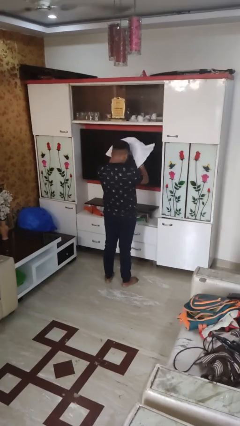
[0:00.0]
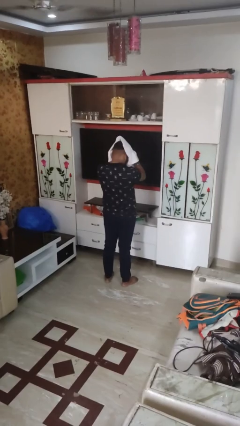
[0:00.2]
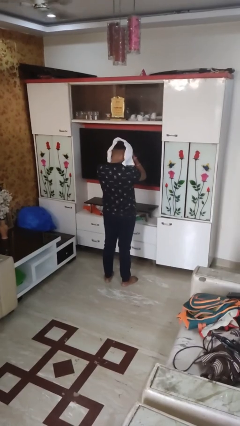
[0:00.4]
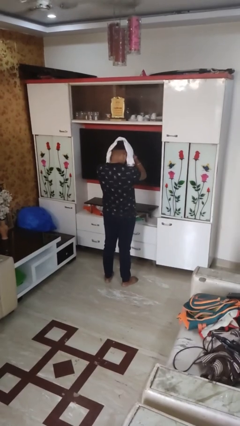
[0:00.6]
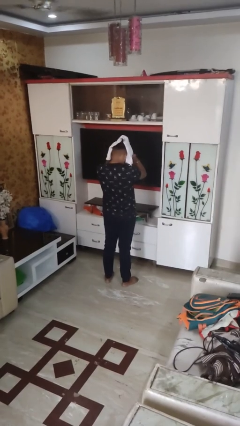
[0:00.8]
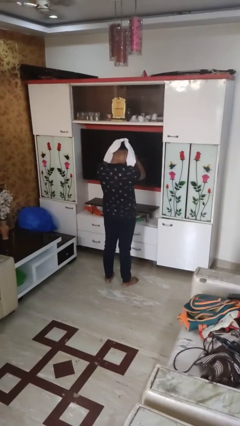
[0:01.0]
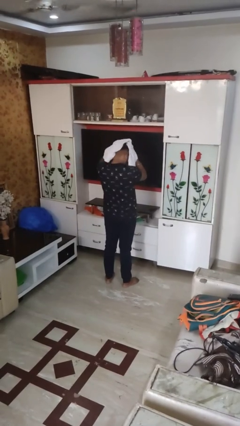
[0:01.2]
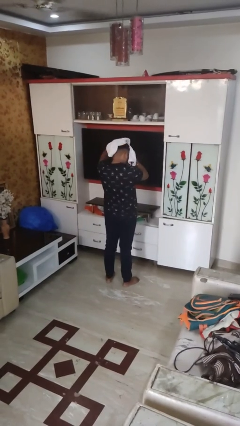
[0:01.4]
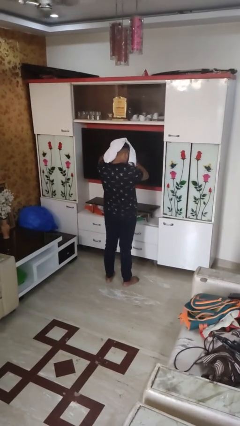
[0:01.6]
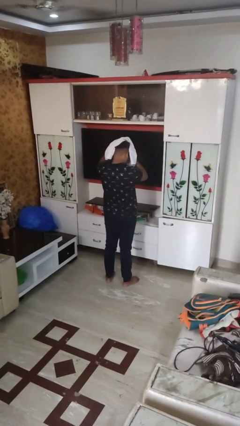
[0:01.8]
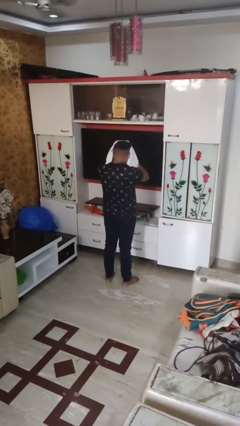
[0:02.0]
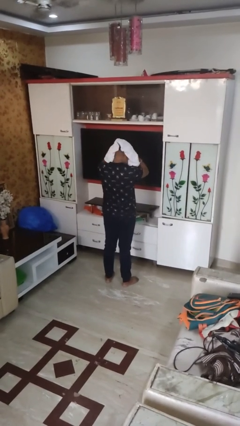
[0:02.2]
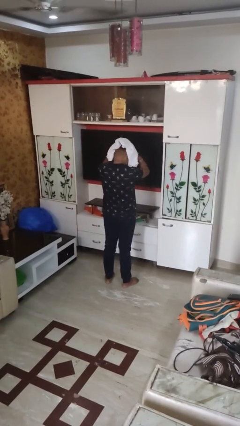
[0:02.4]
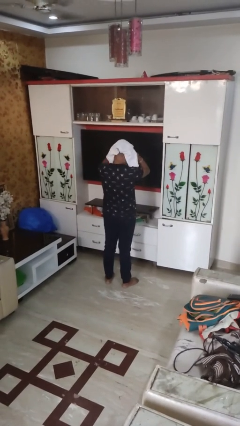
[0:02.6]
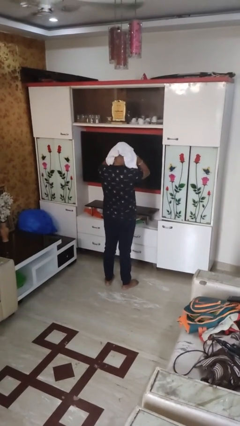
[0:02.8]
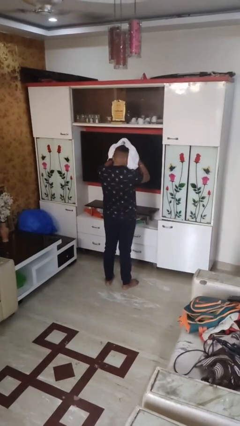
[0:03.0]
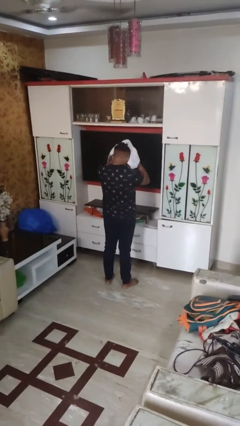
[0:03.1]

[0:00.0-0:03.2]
person dries hair with towel

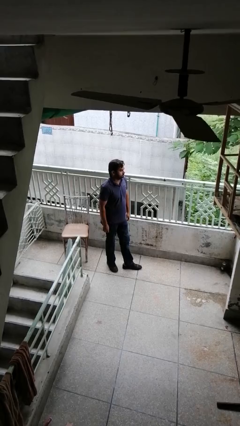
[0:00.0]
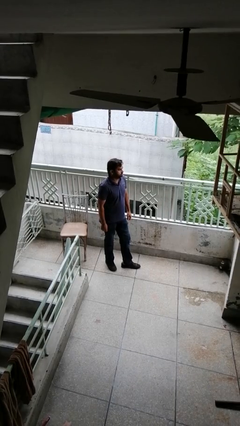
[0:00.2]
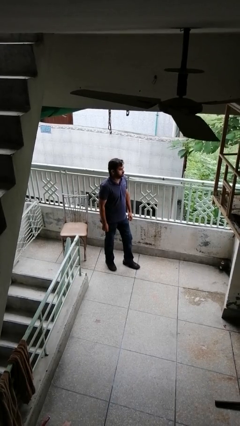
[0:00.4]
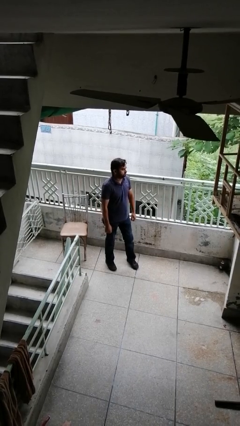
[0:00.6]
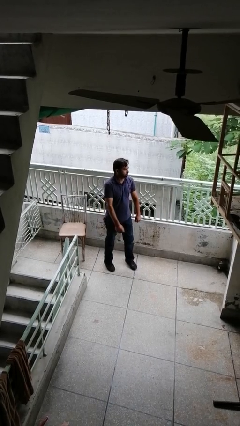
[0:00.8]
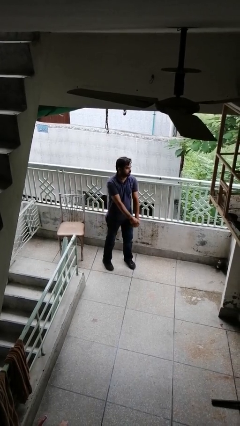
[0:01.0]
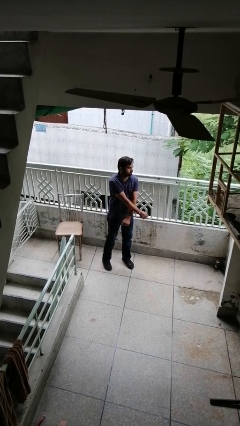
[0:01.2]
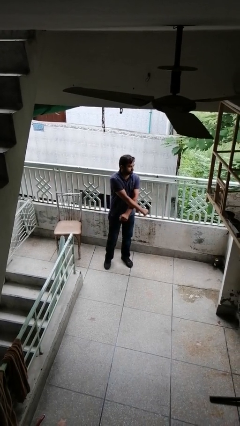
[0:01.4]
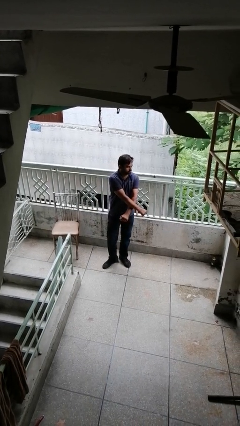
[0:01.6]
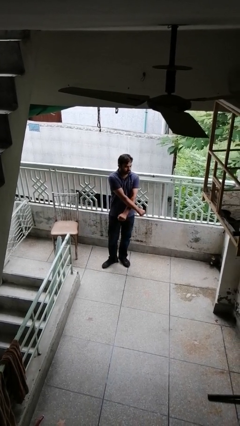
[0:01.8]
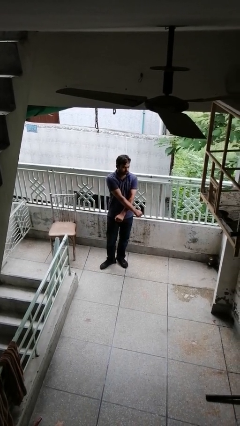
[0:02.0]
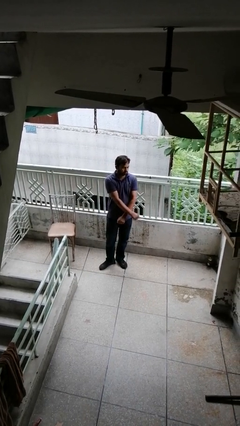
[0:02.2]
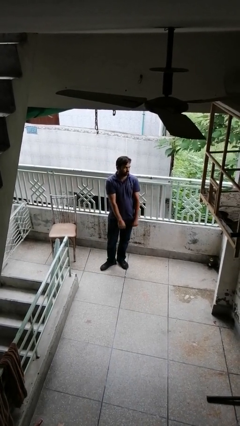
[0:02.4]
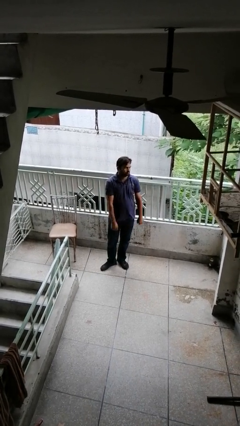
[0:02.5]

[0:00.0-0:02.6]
person gestures arms x

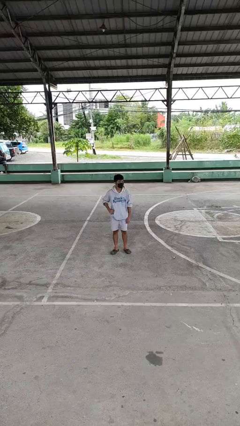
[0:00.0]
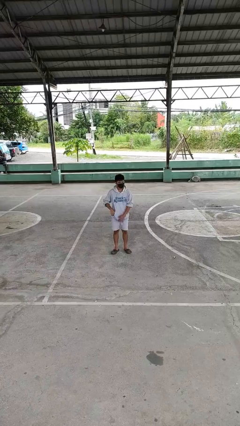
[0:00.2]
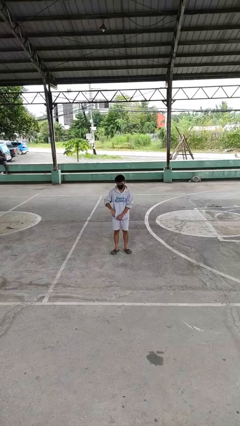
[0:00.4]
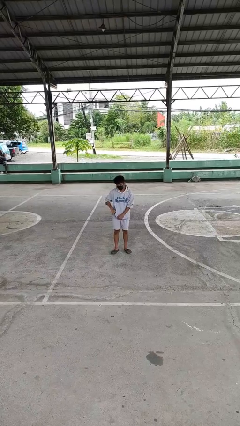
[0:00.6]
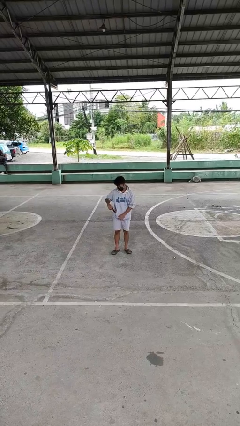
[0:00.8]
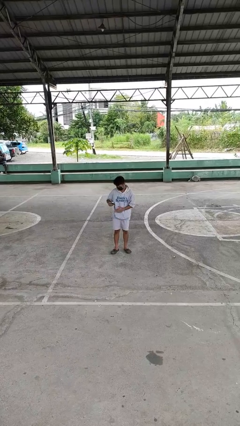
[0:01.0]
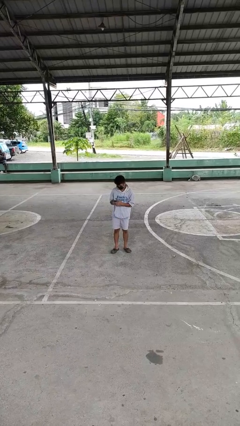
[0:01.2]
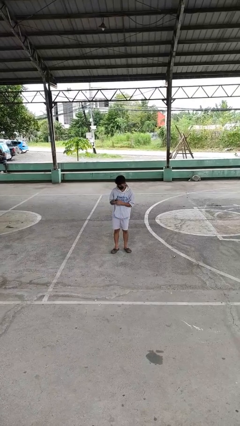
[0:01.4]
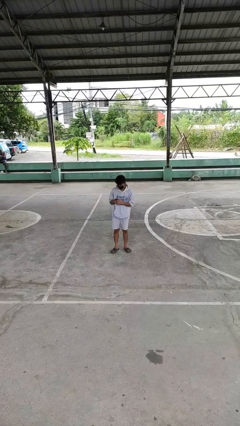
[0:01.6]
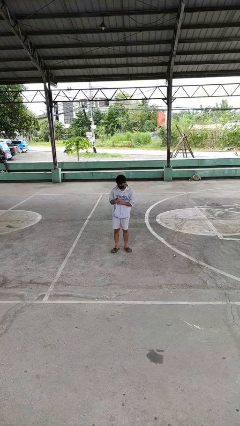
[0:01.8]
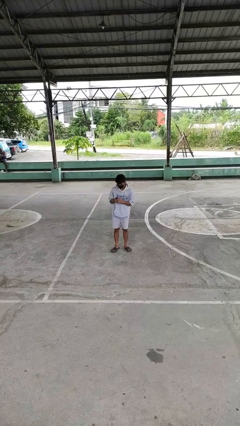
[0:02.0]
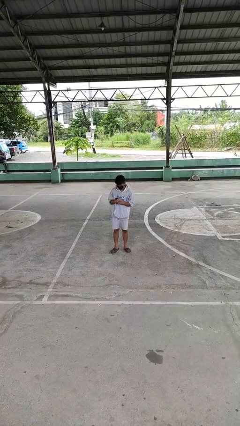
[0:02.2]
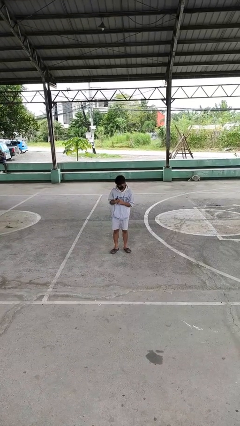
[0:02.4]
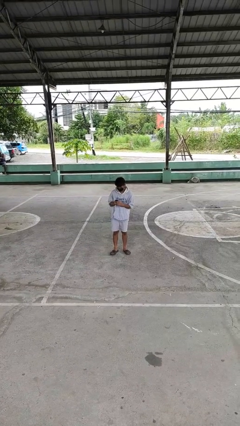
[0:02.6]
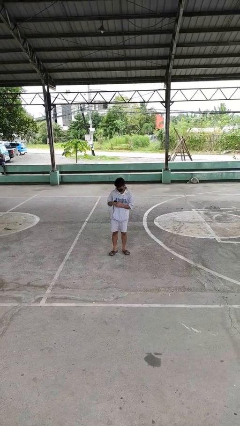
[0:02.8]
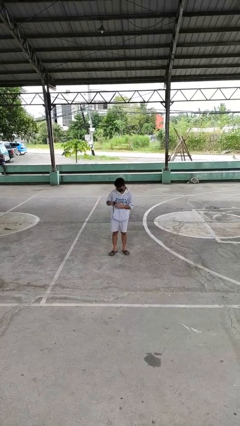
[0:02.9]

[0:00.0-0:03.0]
person takes phone from pocket

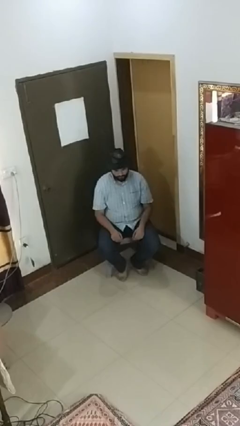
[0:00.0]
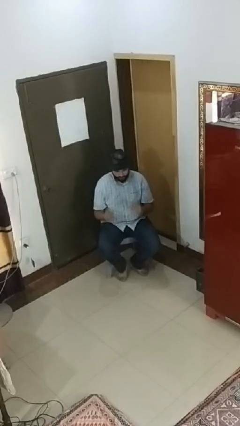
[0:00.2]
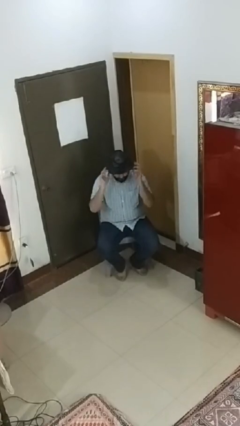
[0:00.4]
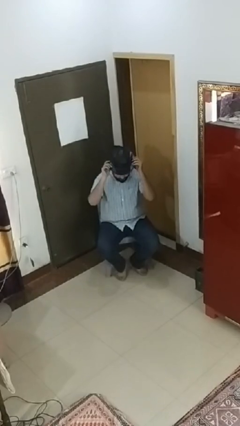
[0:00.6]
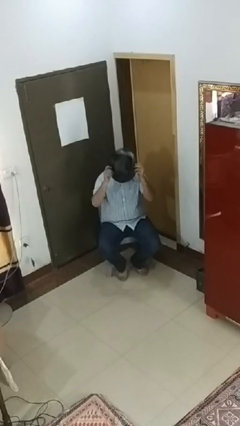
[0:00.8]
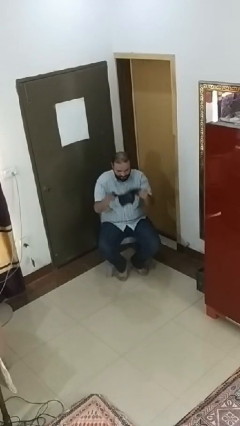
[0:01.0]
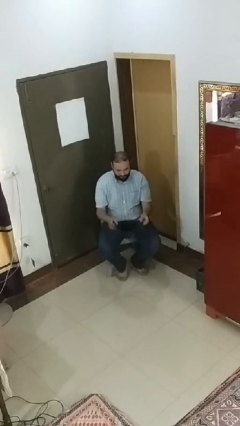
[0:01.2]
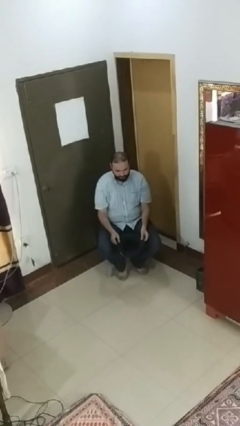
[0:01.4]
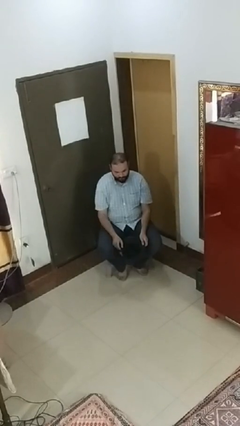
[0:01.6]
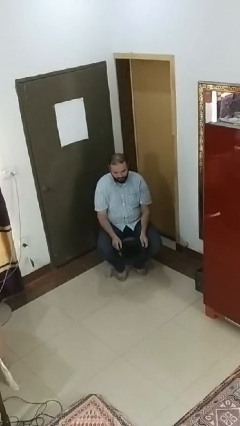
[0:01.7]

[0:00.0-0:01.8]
person takes off hat

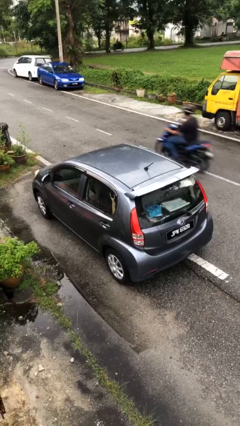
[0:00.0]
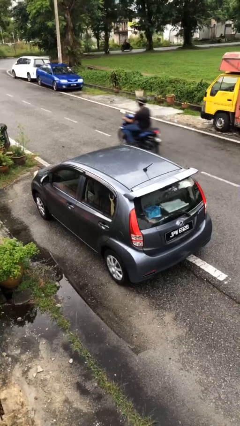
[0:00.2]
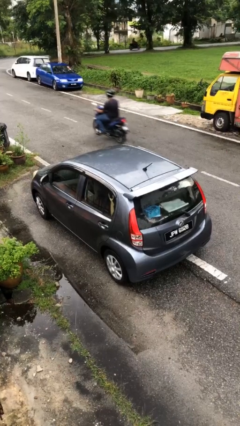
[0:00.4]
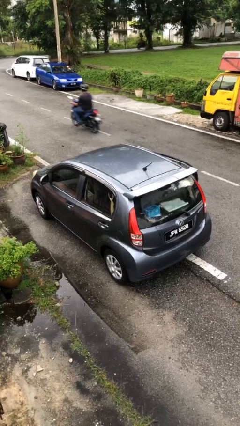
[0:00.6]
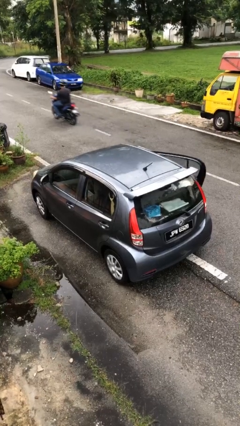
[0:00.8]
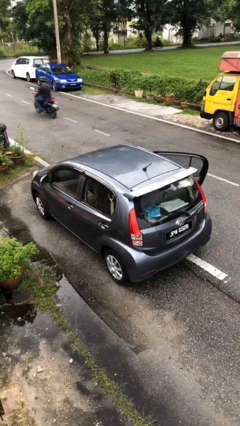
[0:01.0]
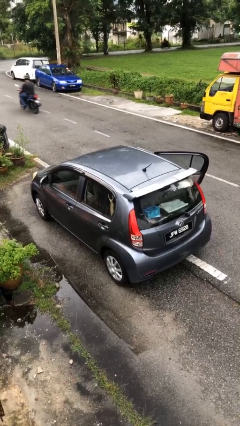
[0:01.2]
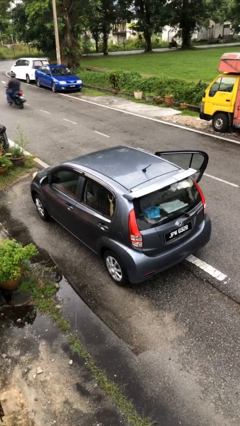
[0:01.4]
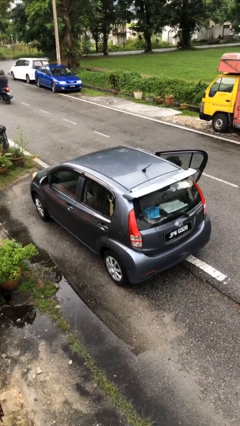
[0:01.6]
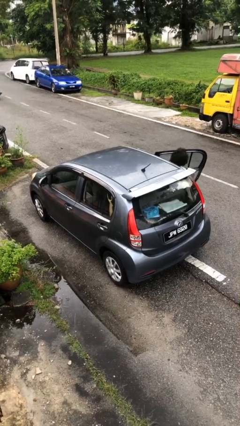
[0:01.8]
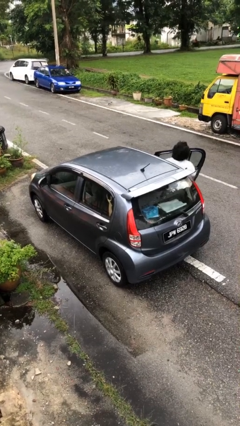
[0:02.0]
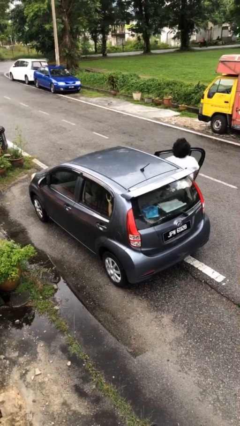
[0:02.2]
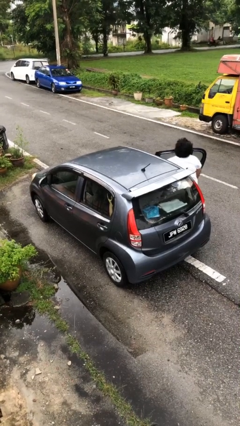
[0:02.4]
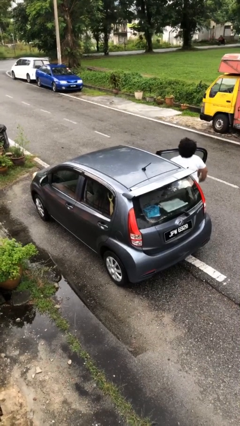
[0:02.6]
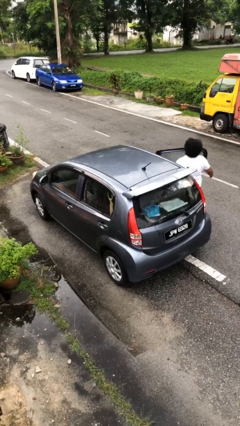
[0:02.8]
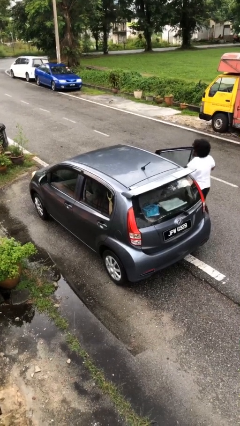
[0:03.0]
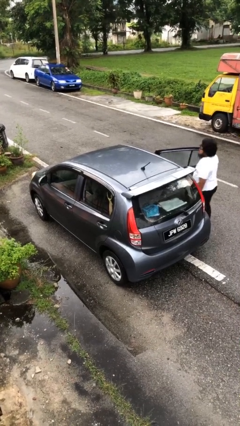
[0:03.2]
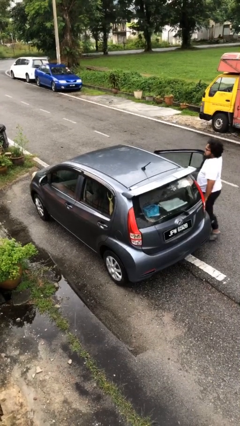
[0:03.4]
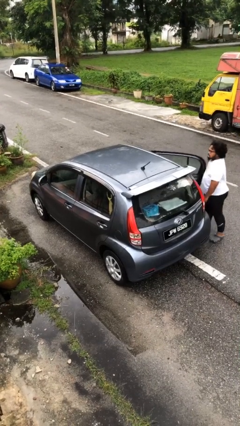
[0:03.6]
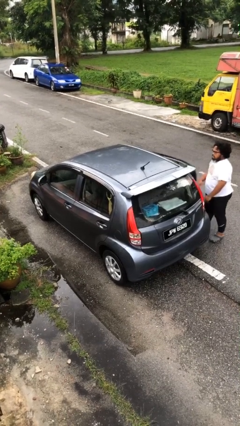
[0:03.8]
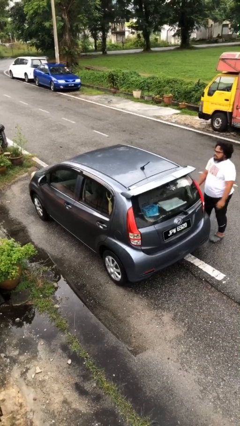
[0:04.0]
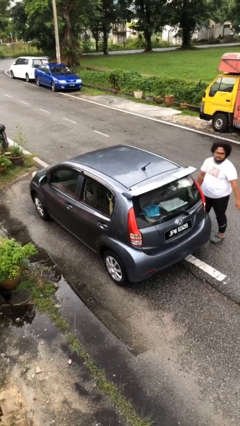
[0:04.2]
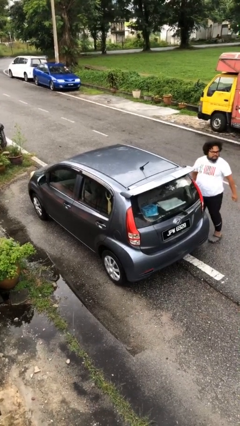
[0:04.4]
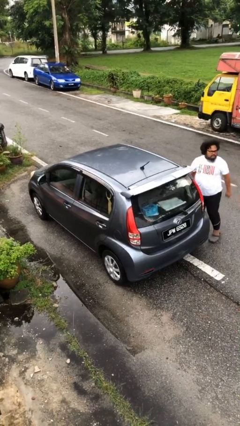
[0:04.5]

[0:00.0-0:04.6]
car drops off person

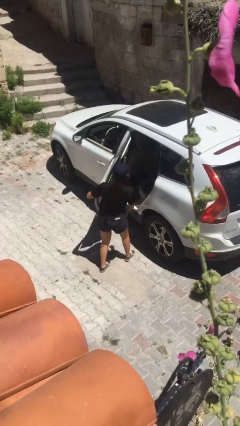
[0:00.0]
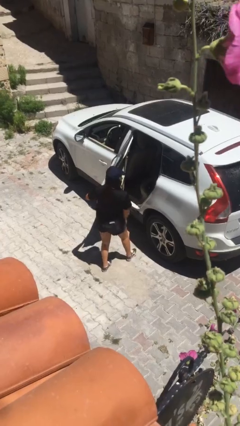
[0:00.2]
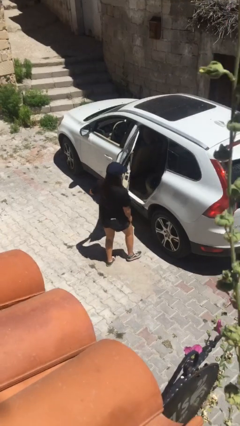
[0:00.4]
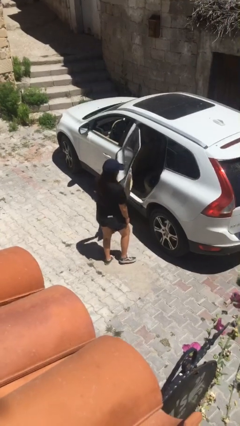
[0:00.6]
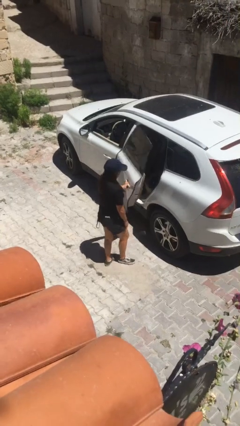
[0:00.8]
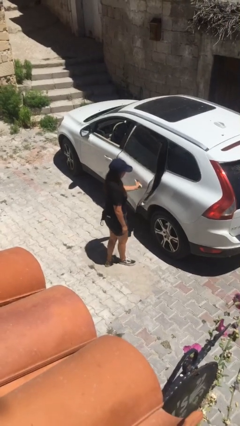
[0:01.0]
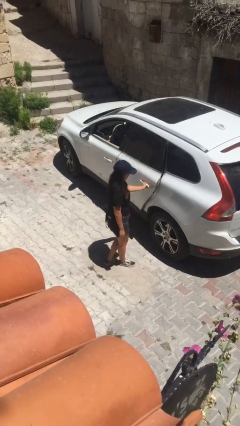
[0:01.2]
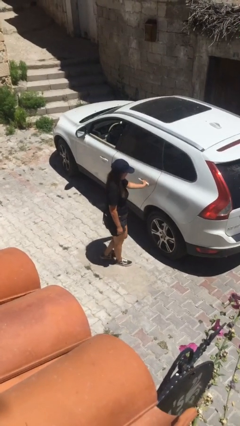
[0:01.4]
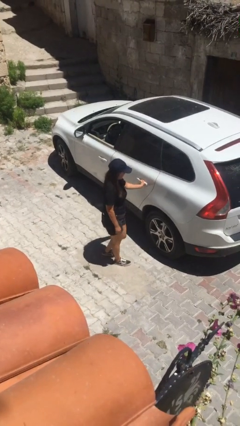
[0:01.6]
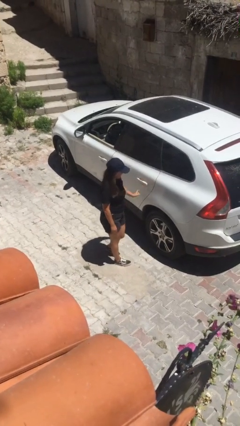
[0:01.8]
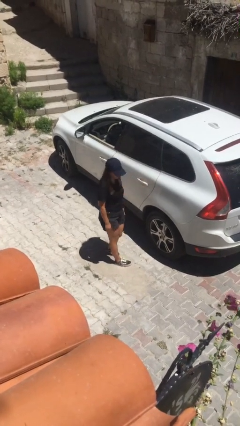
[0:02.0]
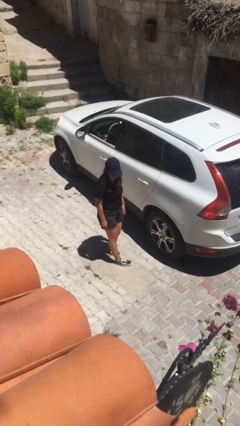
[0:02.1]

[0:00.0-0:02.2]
person closes car door
